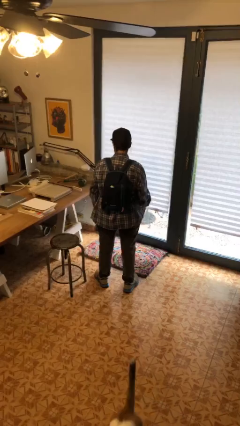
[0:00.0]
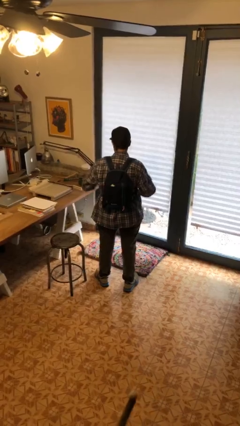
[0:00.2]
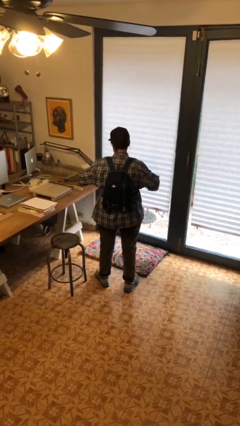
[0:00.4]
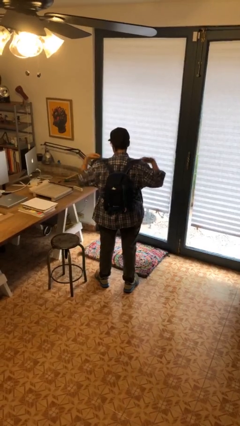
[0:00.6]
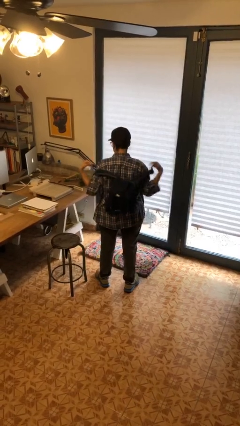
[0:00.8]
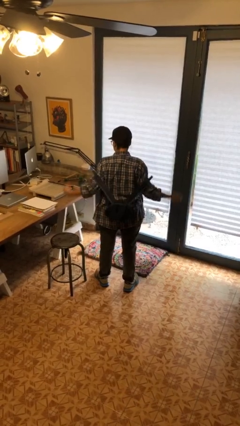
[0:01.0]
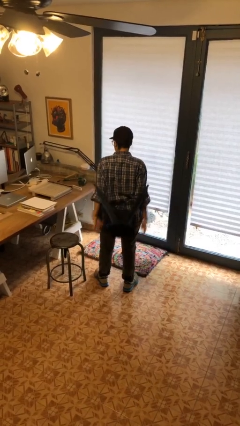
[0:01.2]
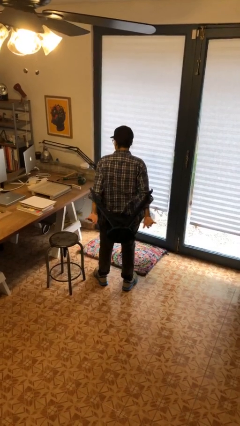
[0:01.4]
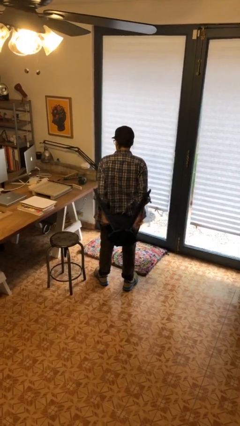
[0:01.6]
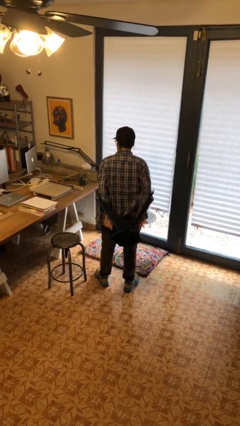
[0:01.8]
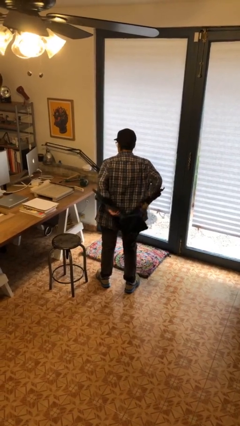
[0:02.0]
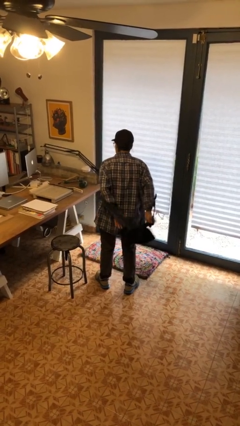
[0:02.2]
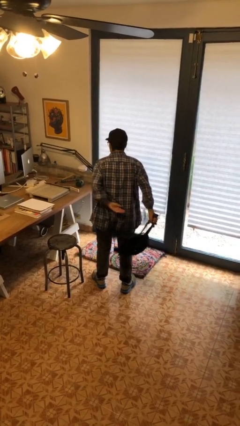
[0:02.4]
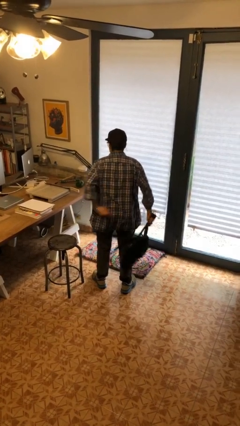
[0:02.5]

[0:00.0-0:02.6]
person takes off backpack

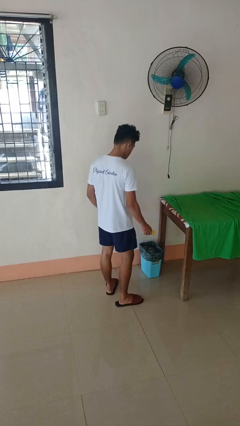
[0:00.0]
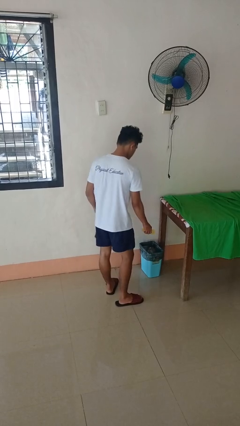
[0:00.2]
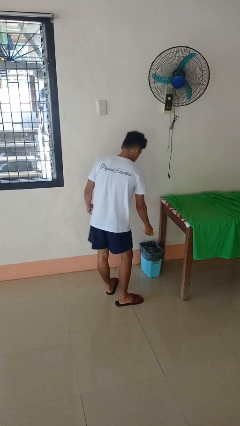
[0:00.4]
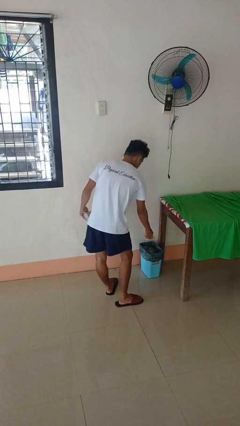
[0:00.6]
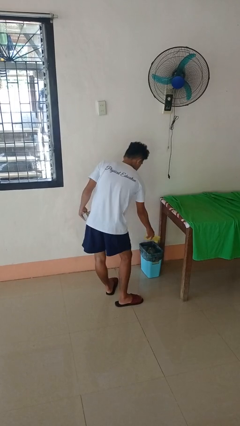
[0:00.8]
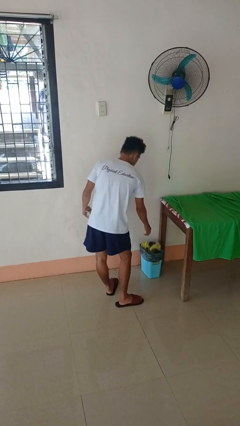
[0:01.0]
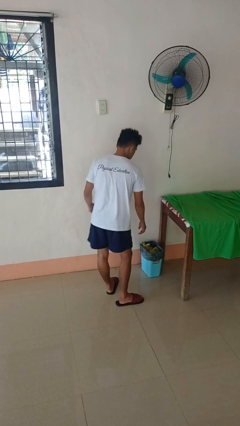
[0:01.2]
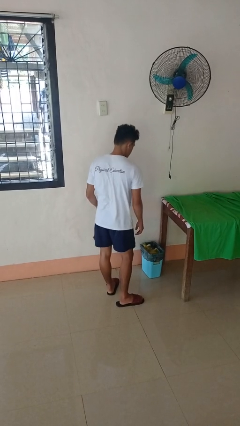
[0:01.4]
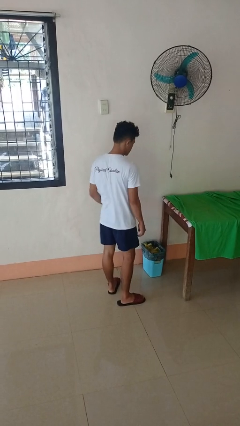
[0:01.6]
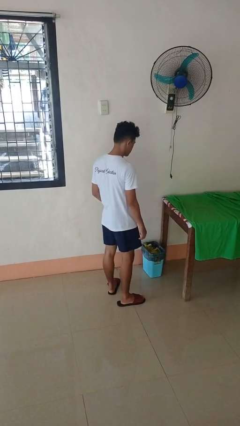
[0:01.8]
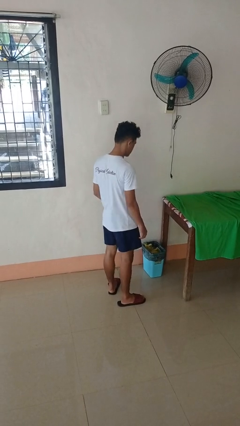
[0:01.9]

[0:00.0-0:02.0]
person discards trash

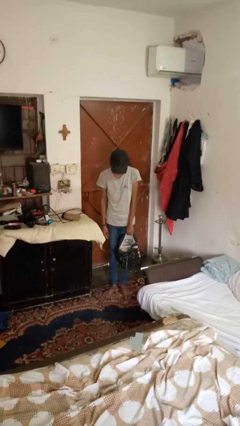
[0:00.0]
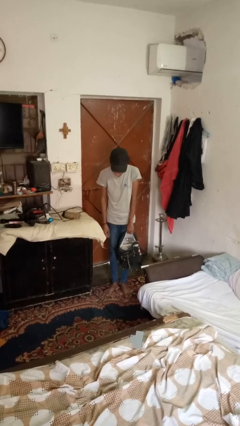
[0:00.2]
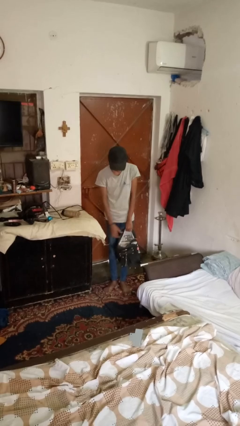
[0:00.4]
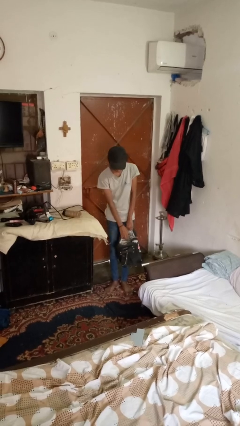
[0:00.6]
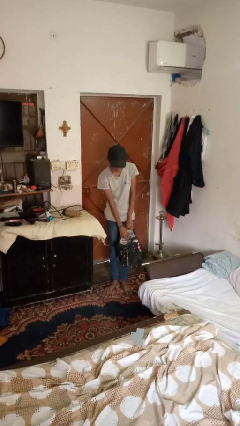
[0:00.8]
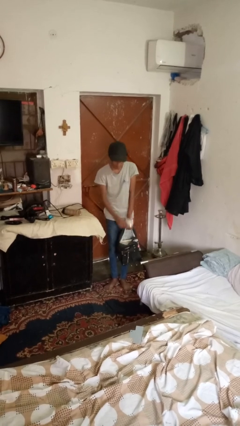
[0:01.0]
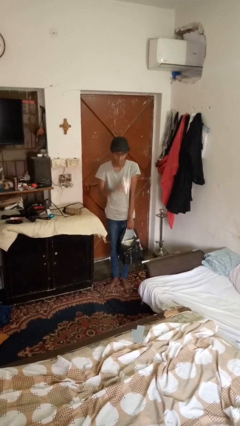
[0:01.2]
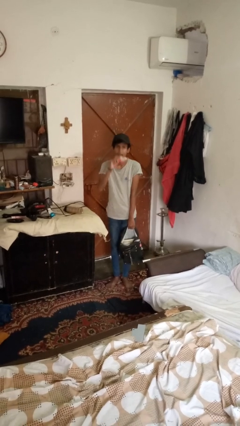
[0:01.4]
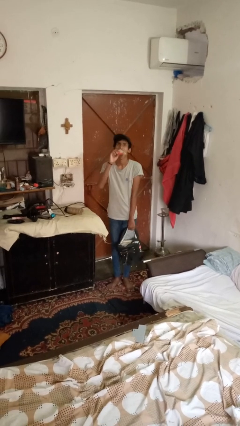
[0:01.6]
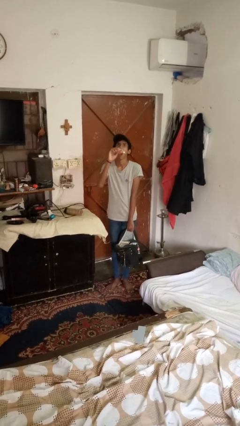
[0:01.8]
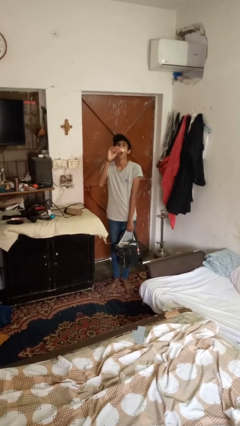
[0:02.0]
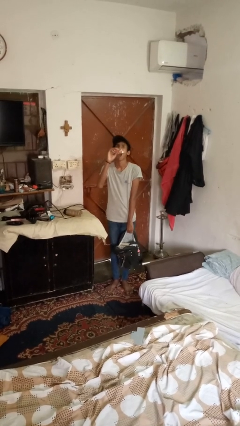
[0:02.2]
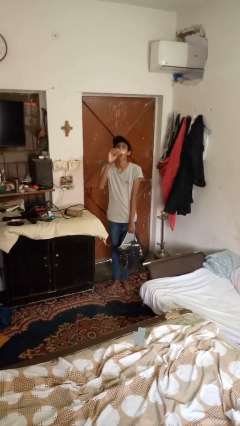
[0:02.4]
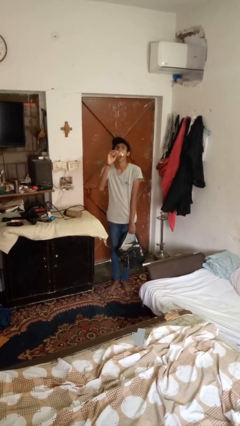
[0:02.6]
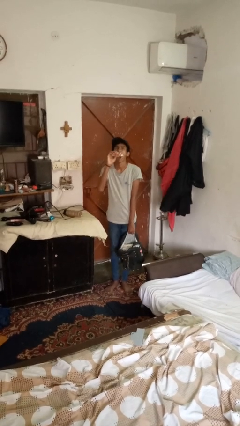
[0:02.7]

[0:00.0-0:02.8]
person eats snack from bag

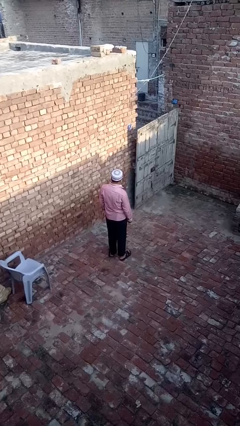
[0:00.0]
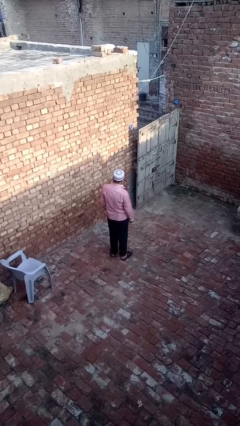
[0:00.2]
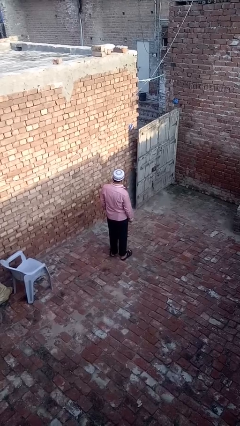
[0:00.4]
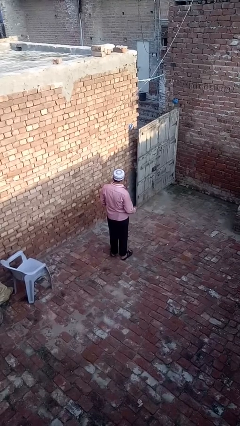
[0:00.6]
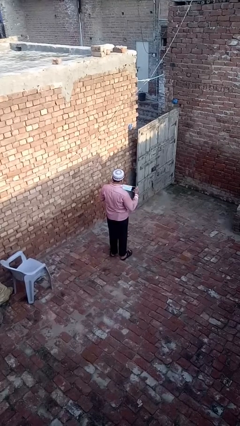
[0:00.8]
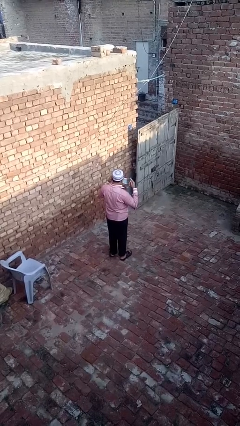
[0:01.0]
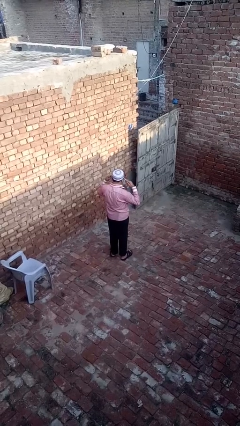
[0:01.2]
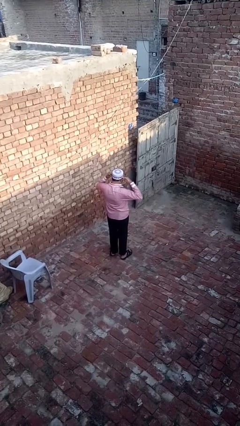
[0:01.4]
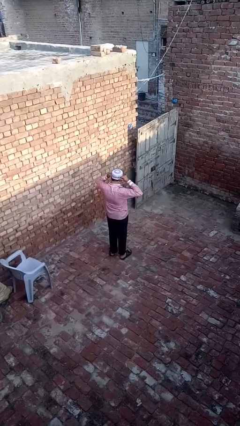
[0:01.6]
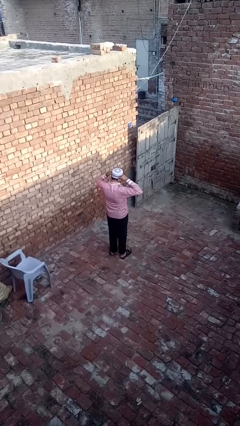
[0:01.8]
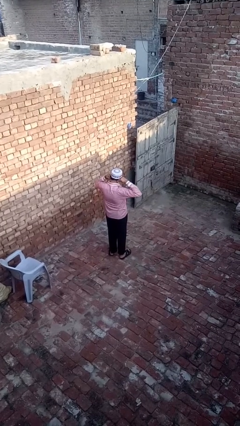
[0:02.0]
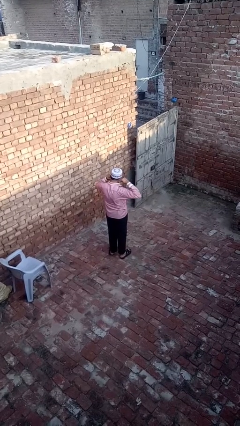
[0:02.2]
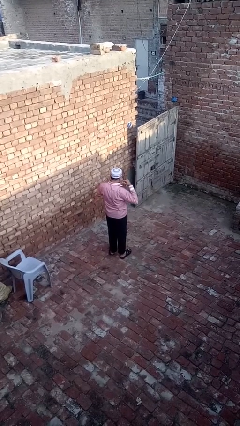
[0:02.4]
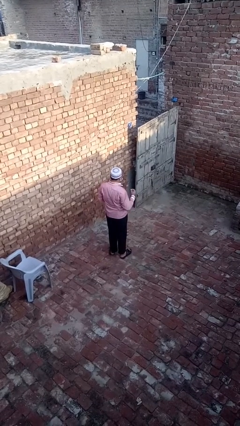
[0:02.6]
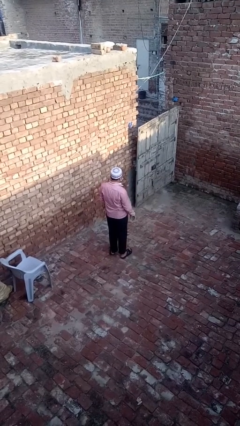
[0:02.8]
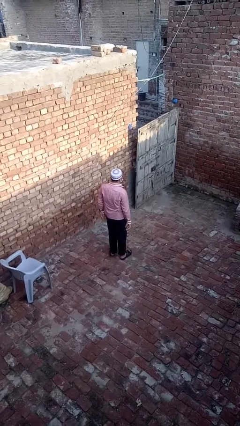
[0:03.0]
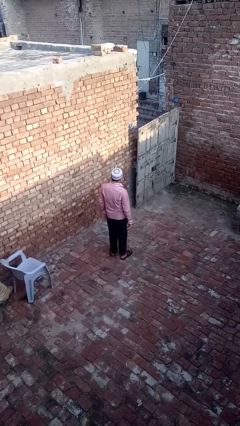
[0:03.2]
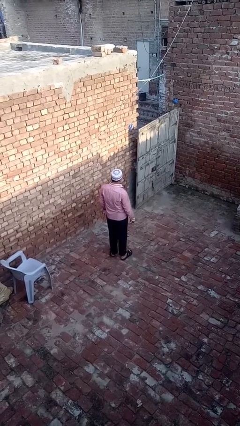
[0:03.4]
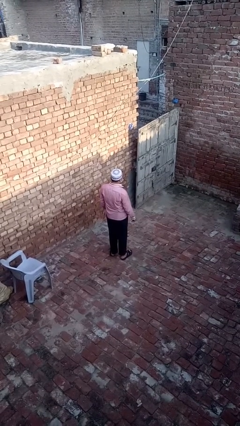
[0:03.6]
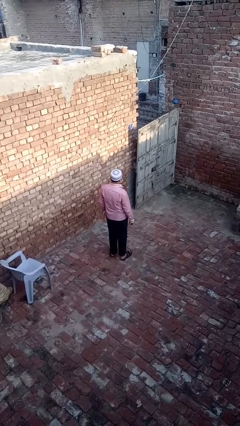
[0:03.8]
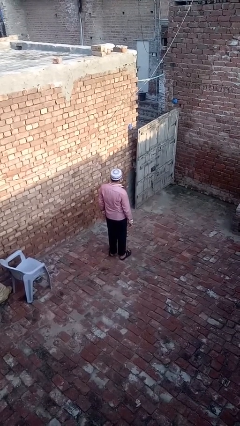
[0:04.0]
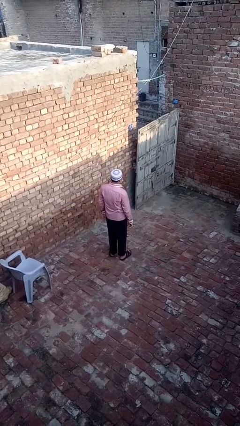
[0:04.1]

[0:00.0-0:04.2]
person puts on facemask

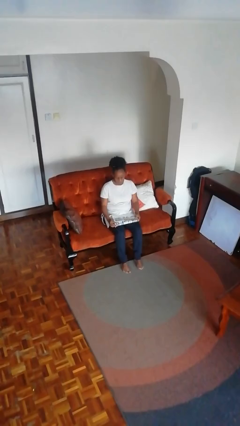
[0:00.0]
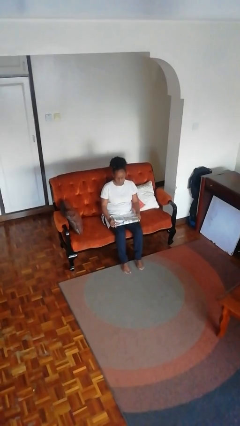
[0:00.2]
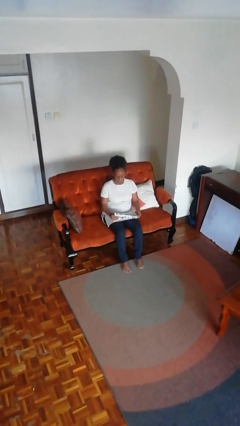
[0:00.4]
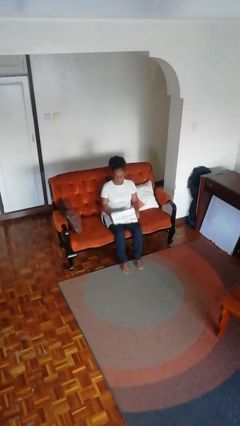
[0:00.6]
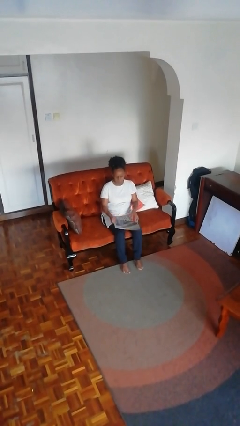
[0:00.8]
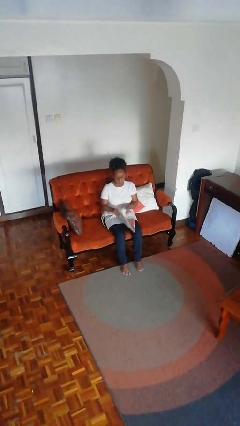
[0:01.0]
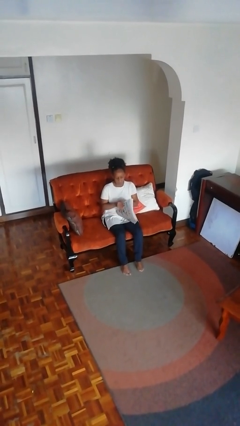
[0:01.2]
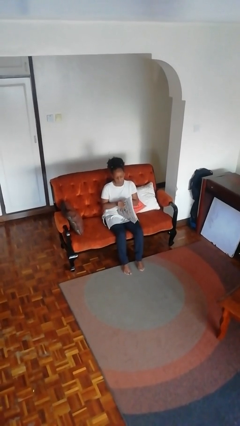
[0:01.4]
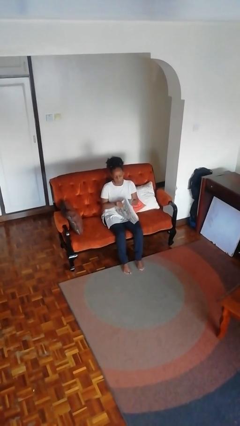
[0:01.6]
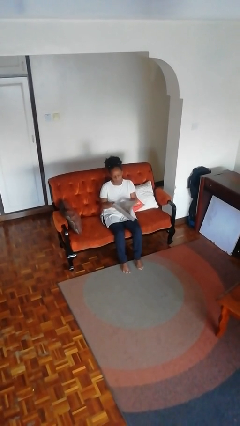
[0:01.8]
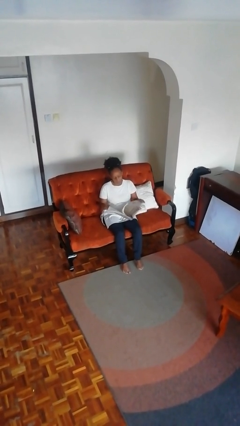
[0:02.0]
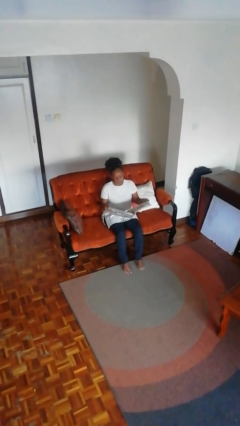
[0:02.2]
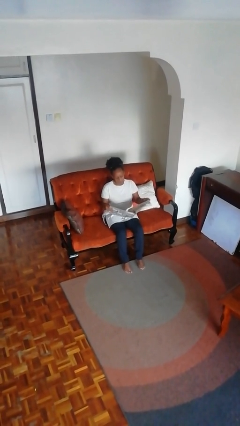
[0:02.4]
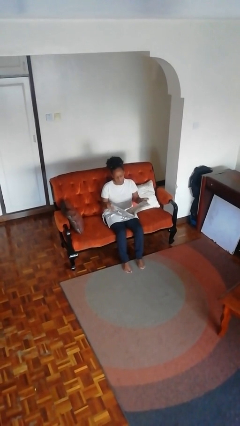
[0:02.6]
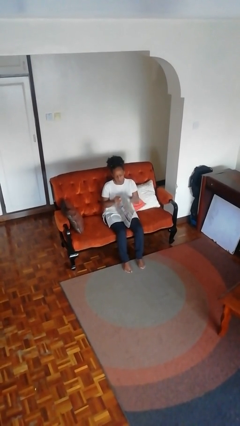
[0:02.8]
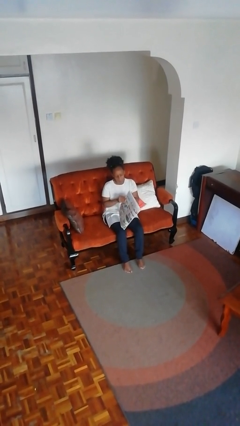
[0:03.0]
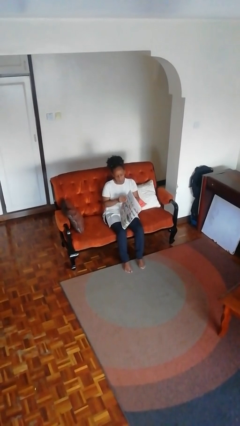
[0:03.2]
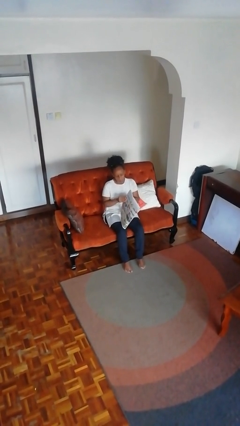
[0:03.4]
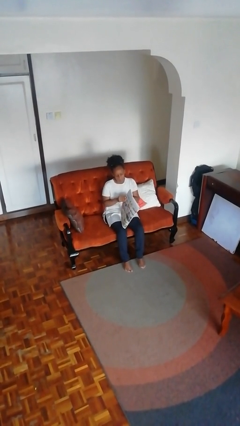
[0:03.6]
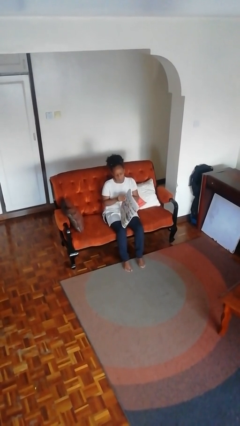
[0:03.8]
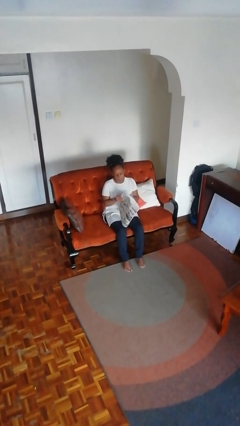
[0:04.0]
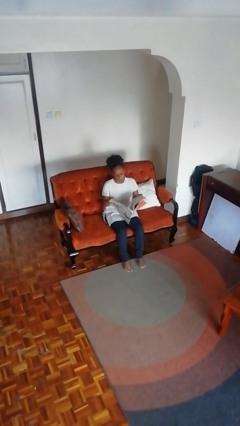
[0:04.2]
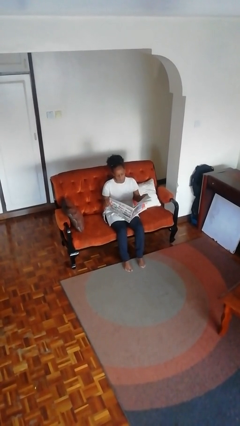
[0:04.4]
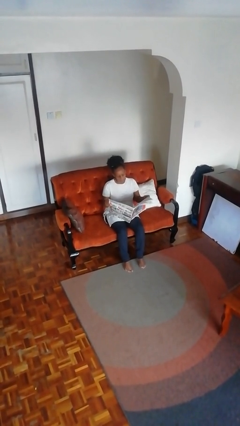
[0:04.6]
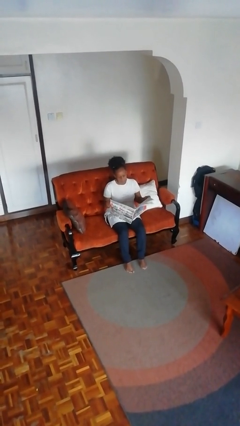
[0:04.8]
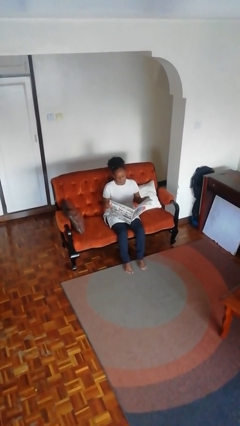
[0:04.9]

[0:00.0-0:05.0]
person reads newspaper

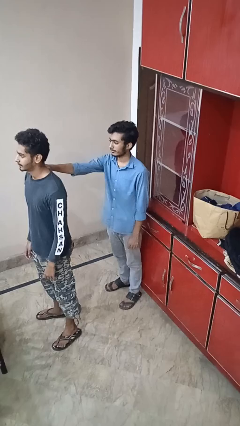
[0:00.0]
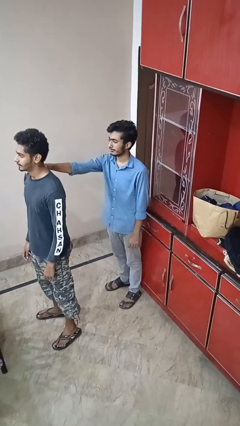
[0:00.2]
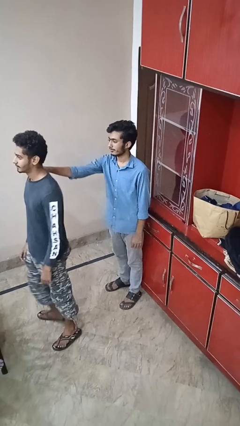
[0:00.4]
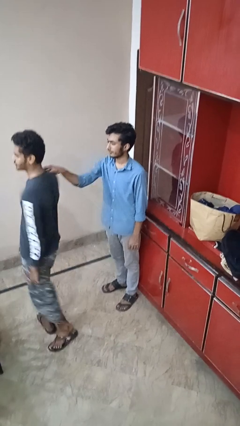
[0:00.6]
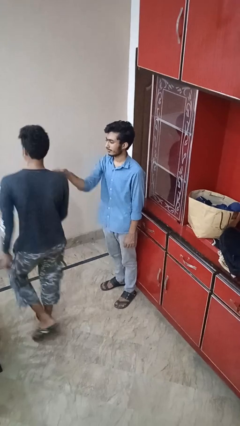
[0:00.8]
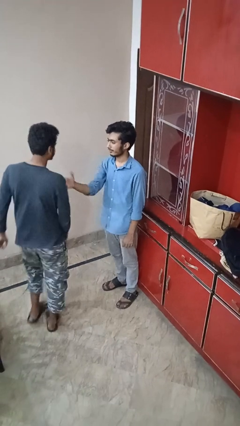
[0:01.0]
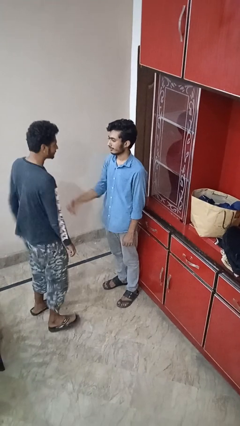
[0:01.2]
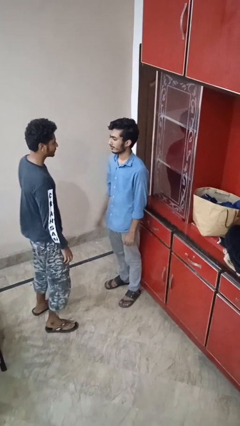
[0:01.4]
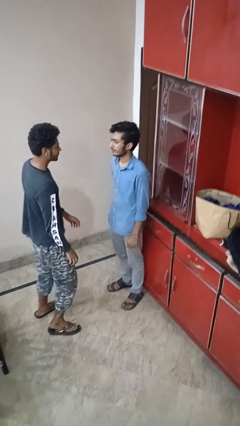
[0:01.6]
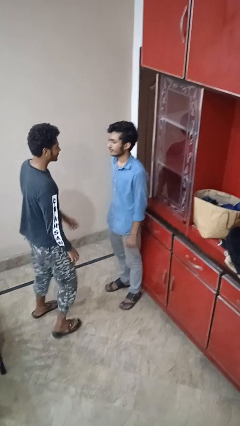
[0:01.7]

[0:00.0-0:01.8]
person spins person around
